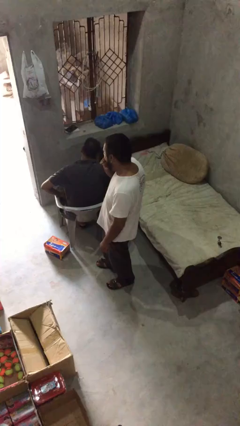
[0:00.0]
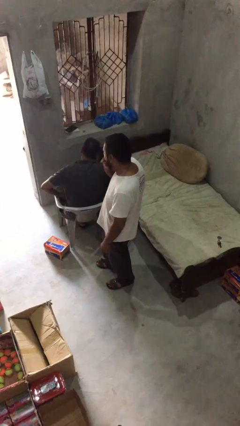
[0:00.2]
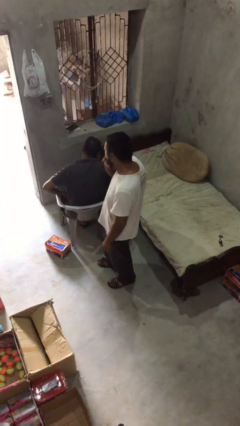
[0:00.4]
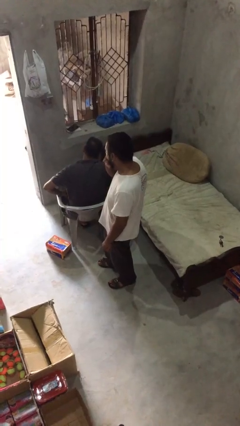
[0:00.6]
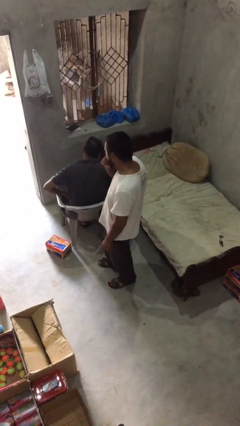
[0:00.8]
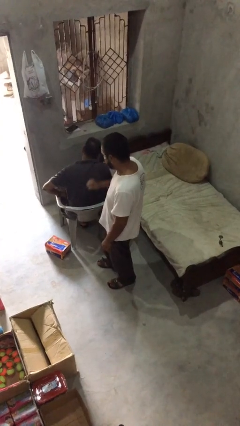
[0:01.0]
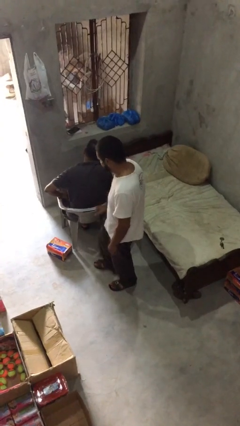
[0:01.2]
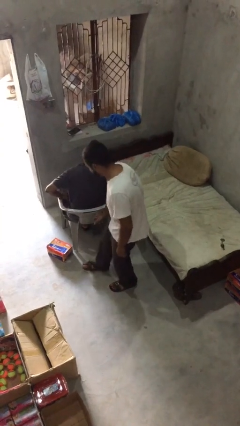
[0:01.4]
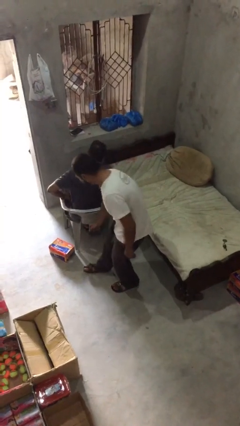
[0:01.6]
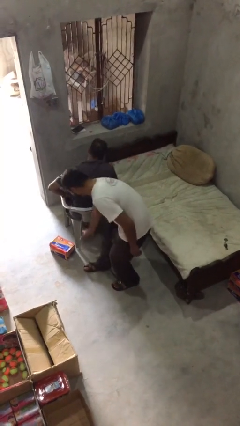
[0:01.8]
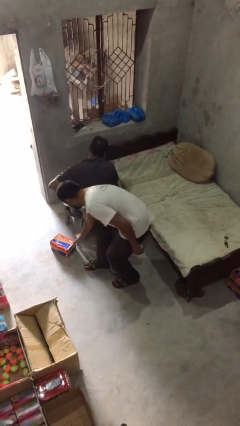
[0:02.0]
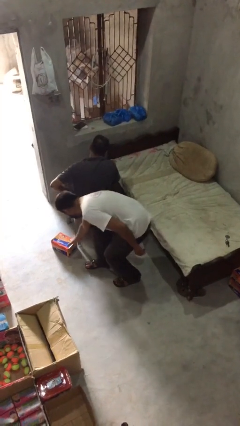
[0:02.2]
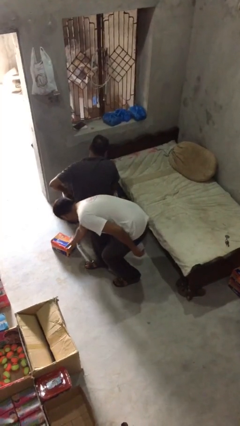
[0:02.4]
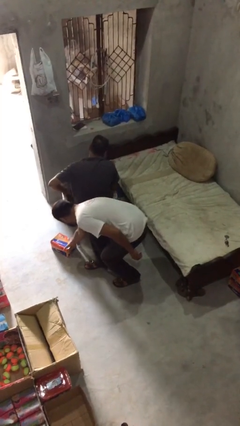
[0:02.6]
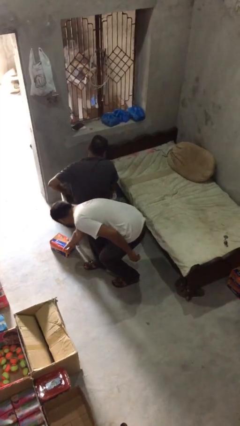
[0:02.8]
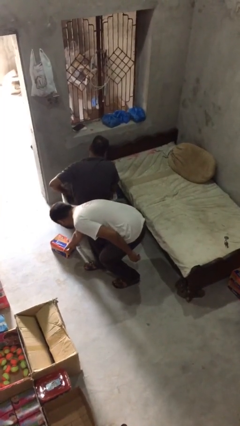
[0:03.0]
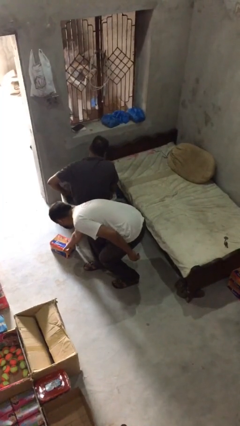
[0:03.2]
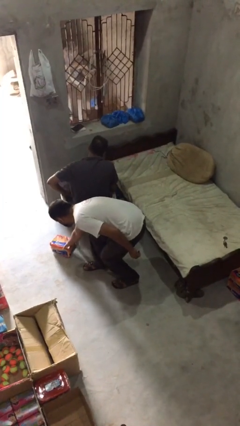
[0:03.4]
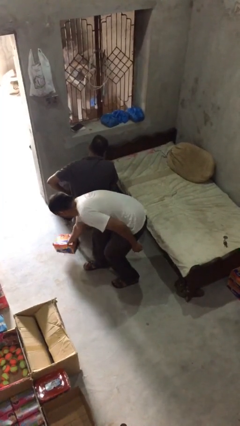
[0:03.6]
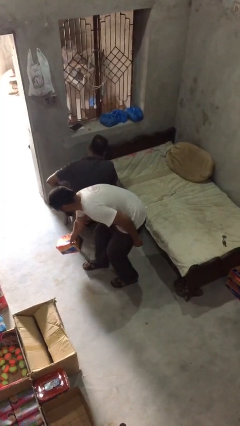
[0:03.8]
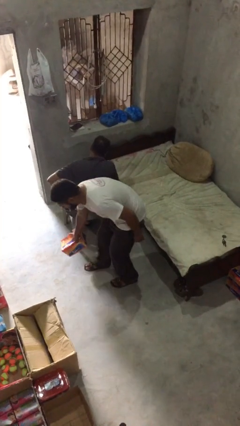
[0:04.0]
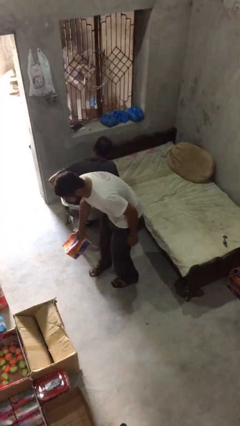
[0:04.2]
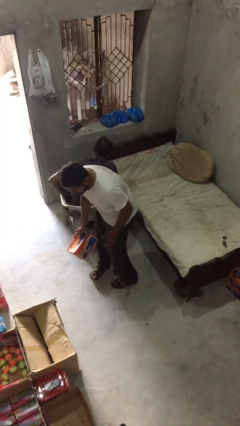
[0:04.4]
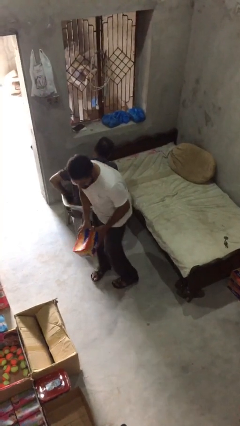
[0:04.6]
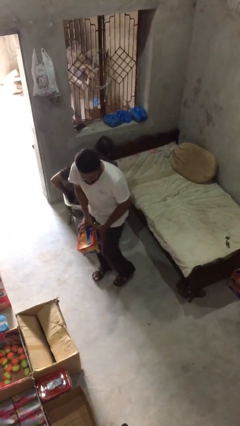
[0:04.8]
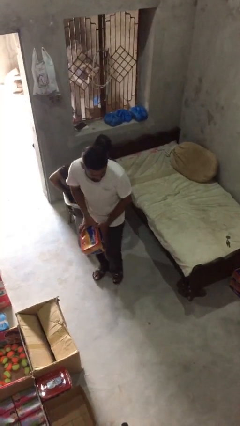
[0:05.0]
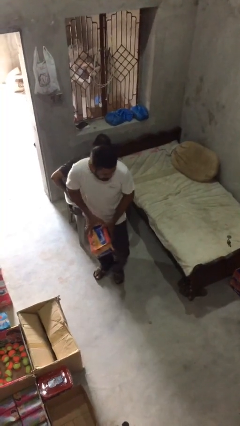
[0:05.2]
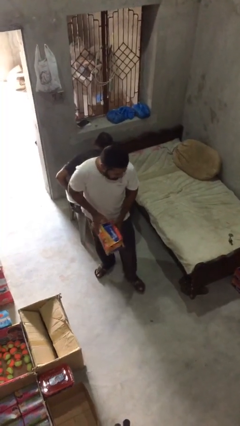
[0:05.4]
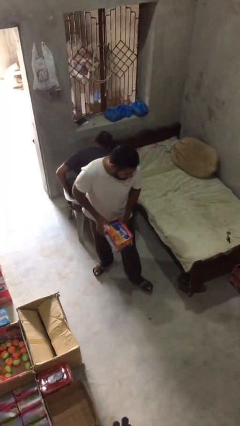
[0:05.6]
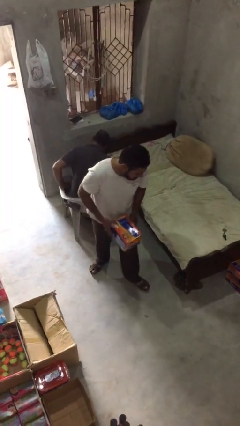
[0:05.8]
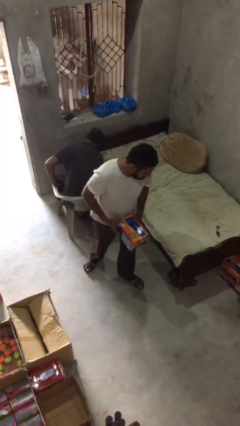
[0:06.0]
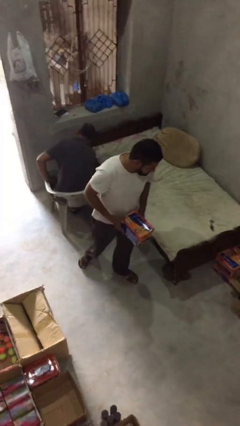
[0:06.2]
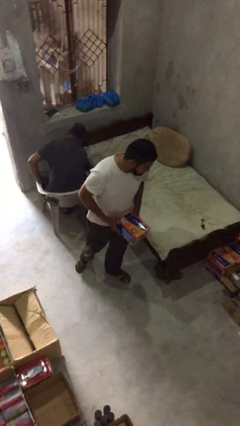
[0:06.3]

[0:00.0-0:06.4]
person steals object from person

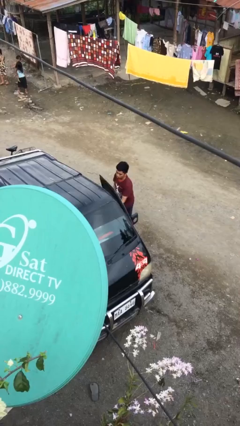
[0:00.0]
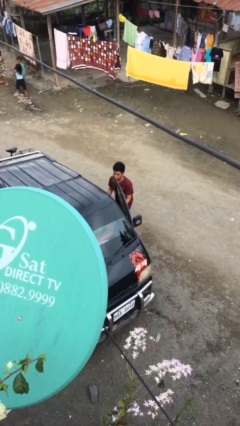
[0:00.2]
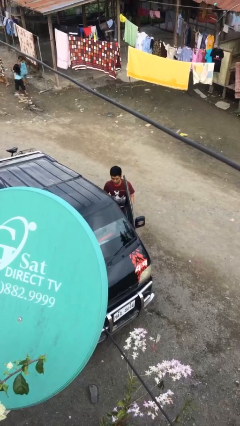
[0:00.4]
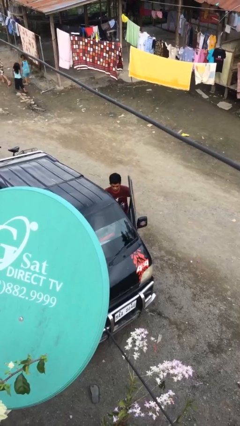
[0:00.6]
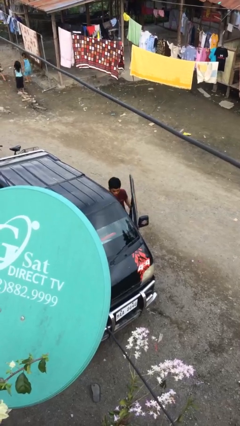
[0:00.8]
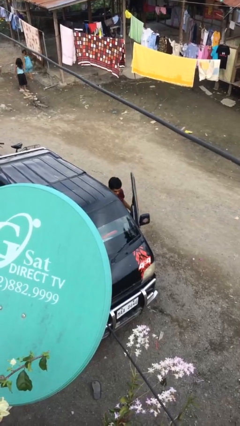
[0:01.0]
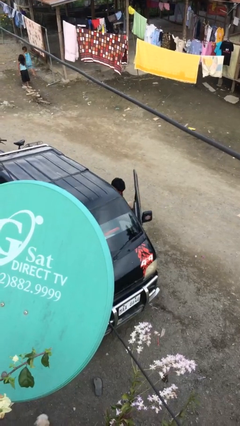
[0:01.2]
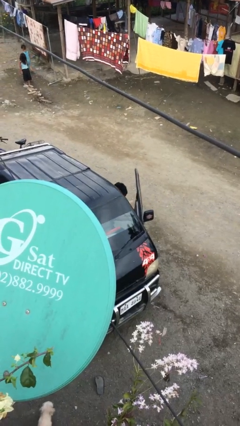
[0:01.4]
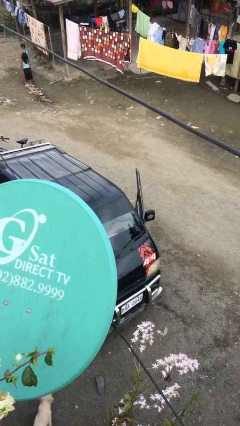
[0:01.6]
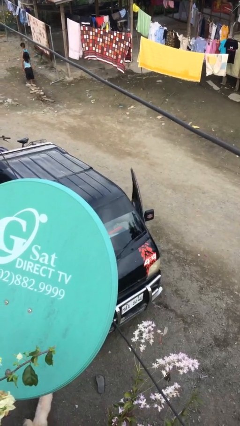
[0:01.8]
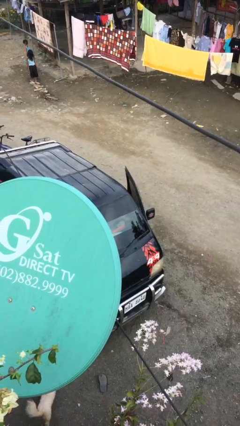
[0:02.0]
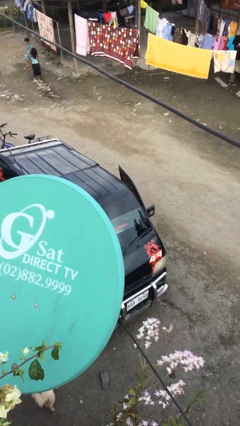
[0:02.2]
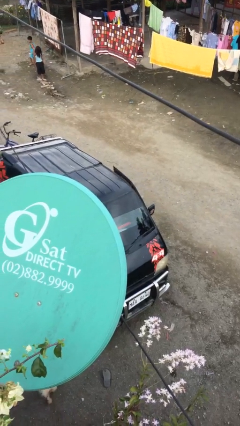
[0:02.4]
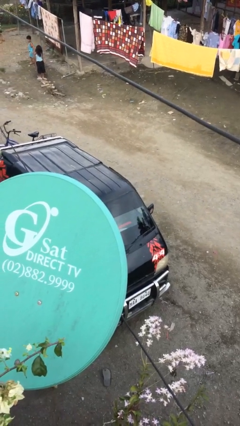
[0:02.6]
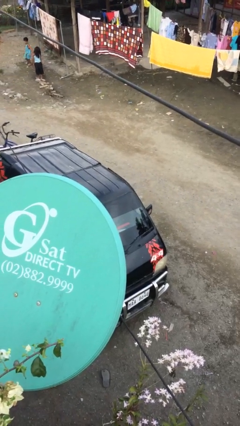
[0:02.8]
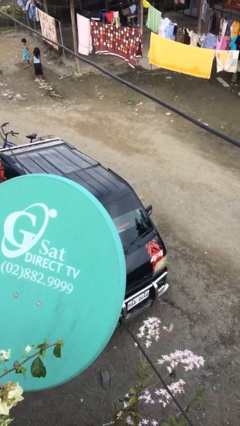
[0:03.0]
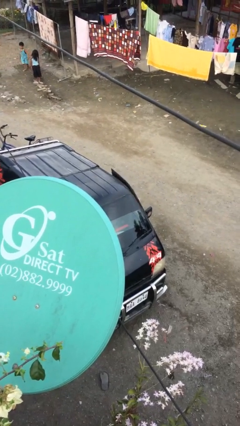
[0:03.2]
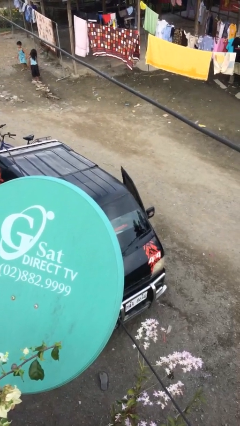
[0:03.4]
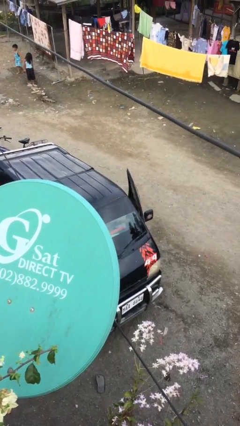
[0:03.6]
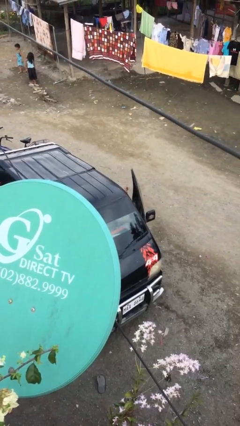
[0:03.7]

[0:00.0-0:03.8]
person enters car

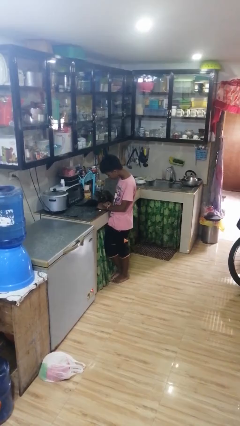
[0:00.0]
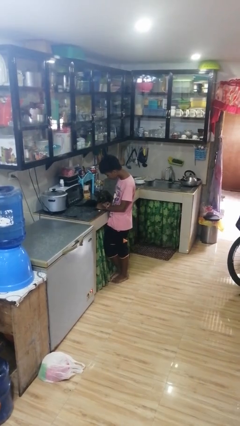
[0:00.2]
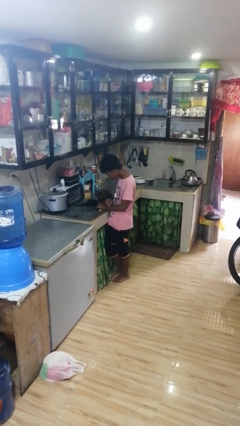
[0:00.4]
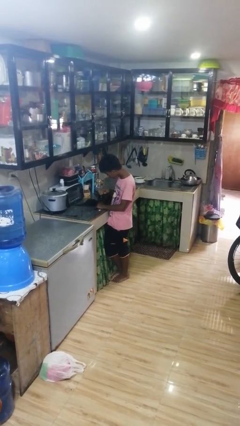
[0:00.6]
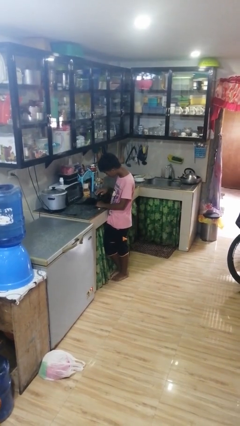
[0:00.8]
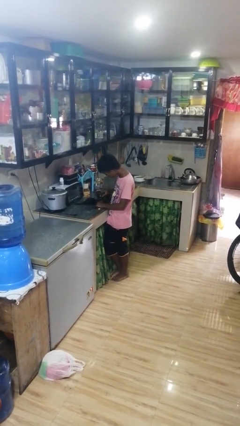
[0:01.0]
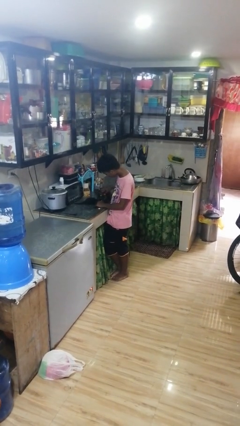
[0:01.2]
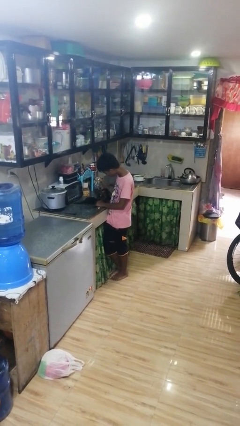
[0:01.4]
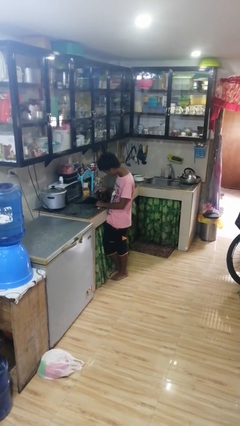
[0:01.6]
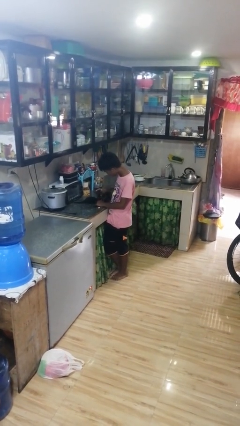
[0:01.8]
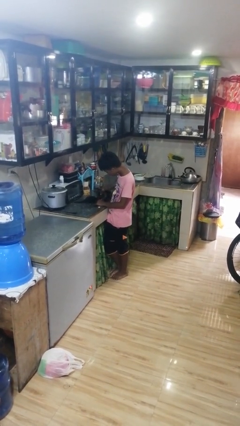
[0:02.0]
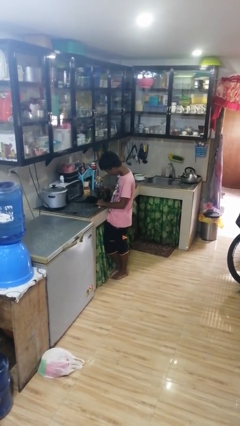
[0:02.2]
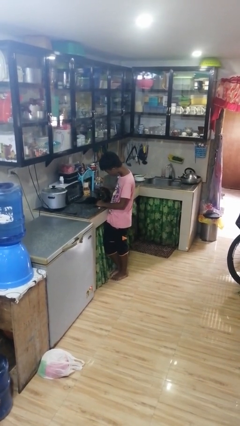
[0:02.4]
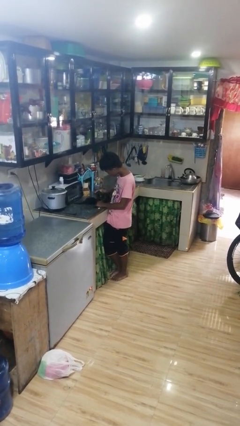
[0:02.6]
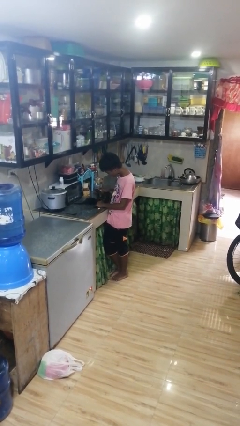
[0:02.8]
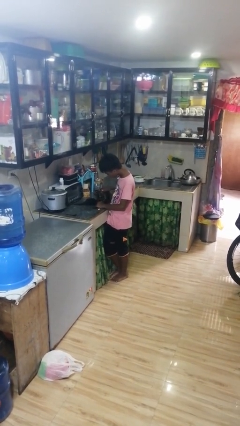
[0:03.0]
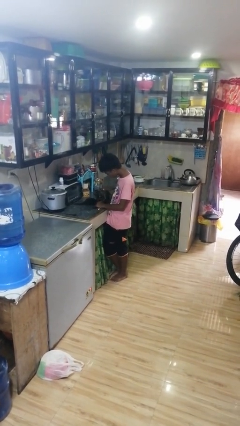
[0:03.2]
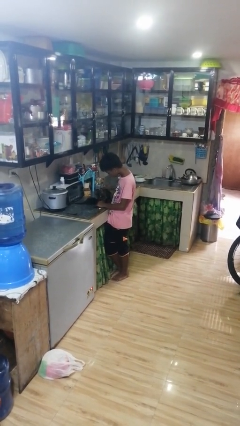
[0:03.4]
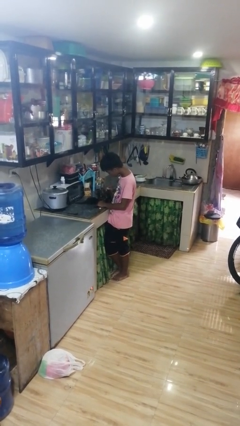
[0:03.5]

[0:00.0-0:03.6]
person pets cat

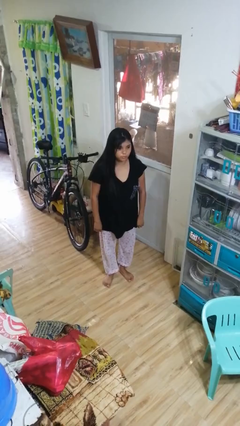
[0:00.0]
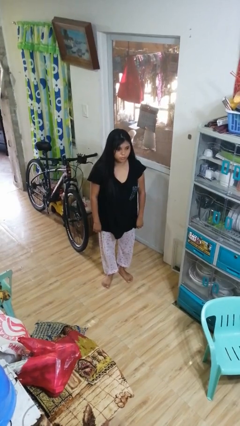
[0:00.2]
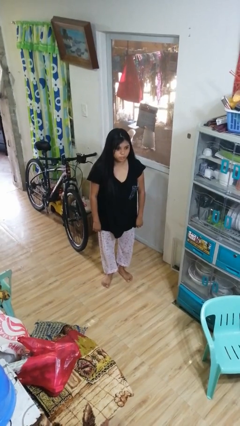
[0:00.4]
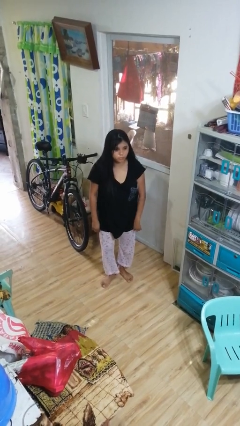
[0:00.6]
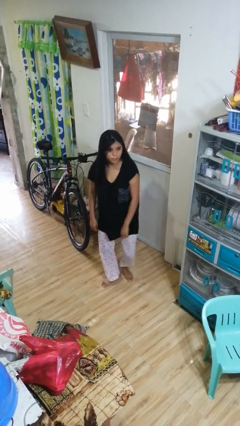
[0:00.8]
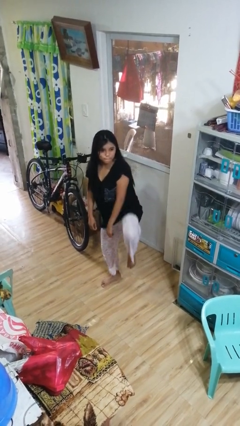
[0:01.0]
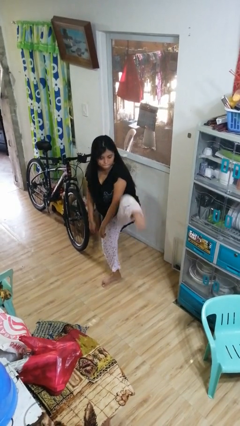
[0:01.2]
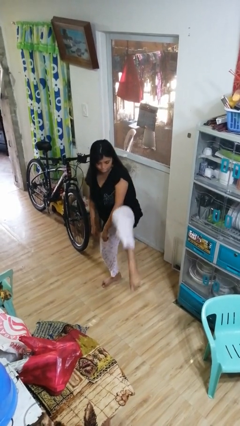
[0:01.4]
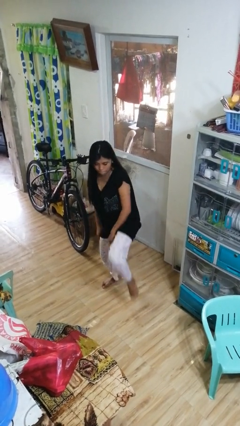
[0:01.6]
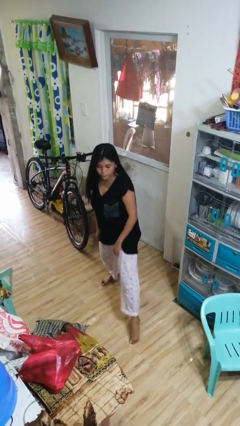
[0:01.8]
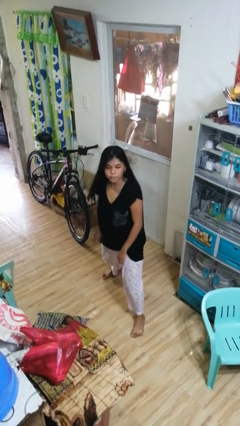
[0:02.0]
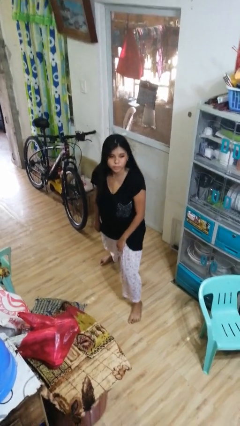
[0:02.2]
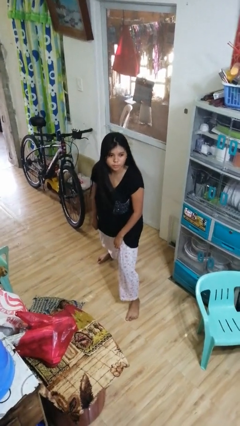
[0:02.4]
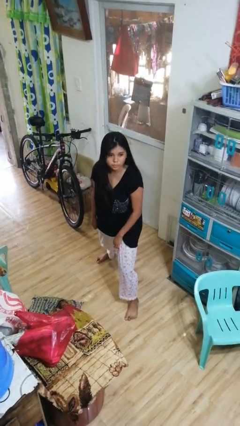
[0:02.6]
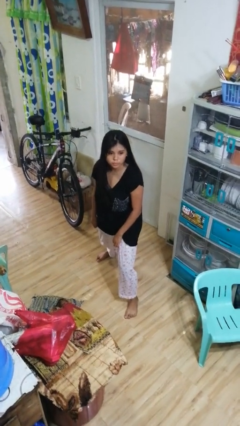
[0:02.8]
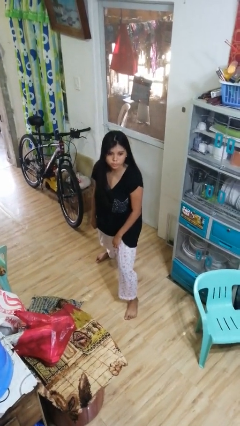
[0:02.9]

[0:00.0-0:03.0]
person karate kicks

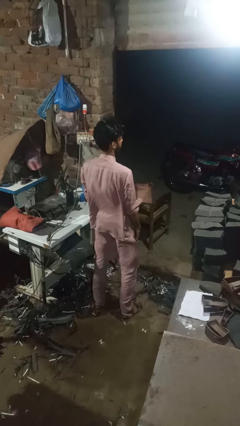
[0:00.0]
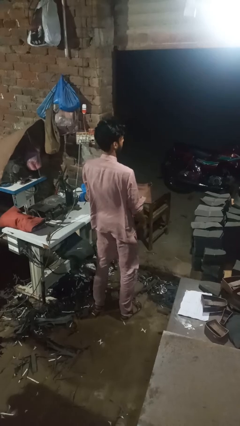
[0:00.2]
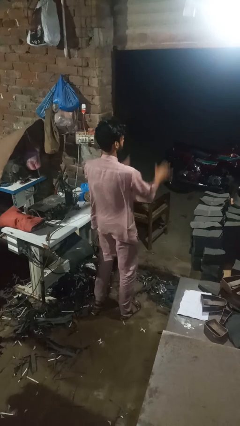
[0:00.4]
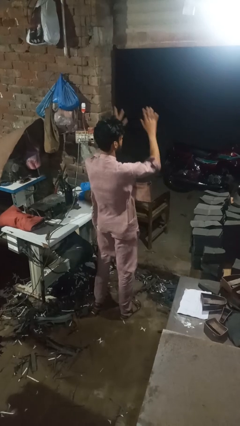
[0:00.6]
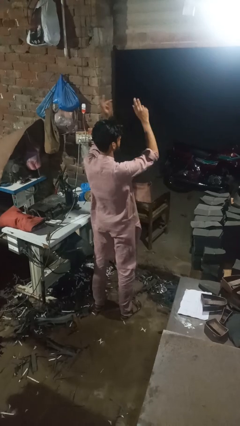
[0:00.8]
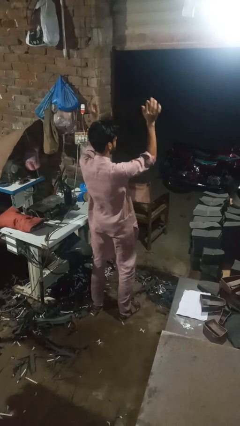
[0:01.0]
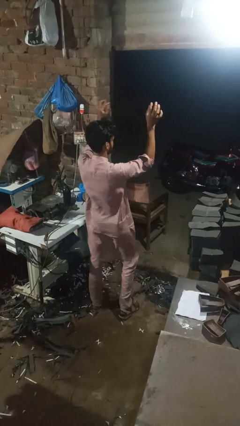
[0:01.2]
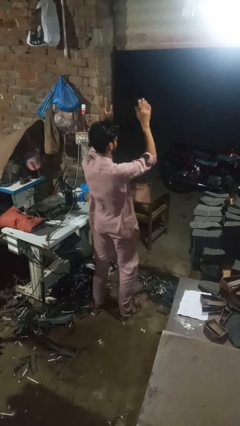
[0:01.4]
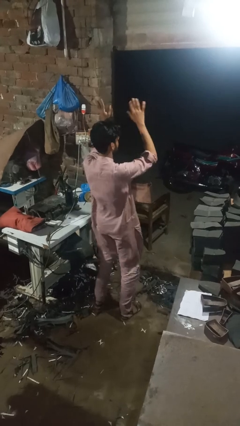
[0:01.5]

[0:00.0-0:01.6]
person dances in place
